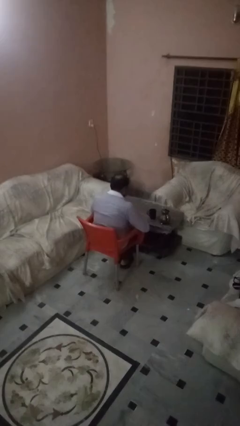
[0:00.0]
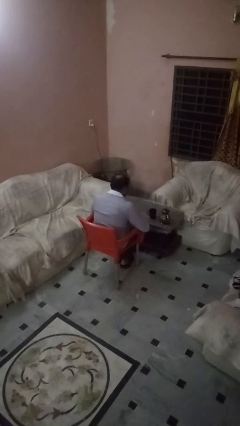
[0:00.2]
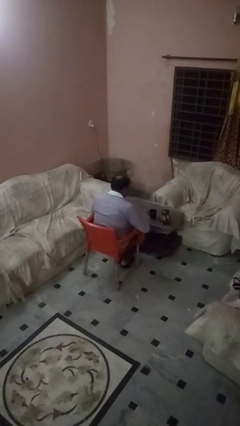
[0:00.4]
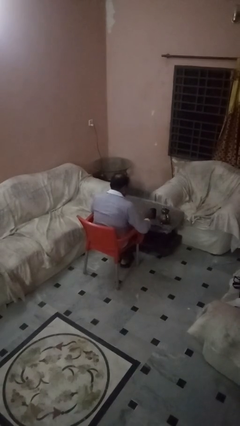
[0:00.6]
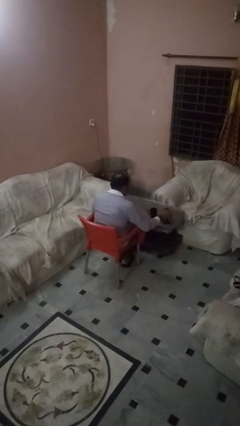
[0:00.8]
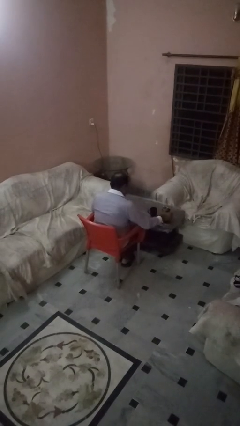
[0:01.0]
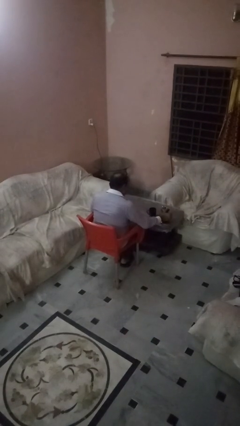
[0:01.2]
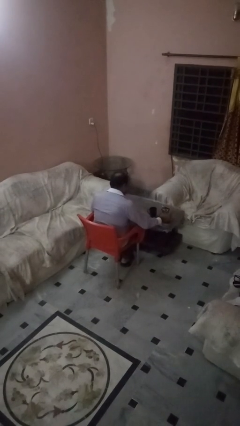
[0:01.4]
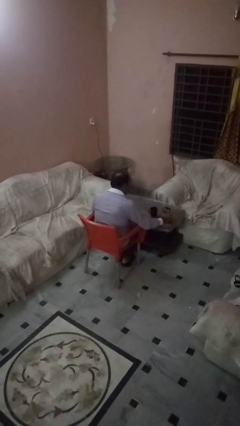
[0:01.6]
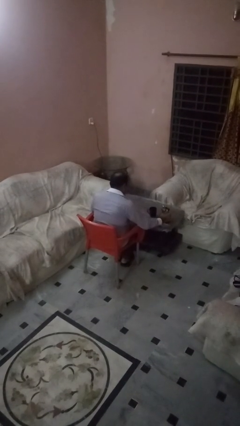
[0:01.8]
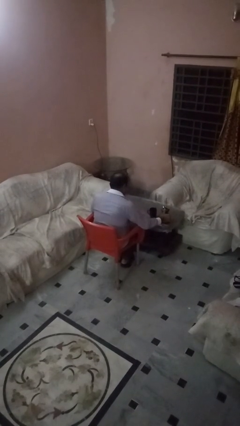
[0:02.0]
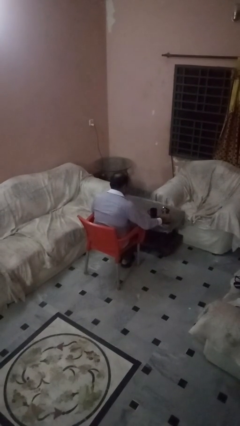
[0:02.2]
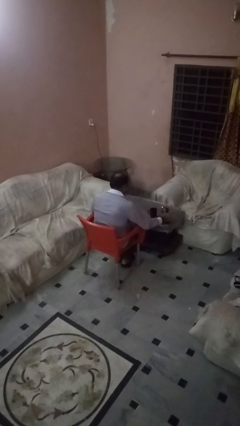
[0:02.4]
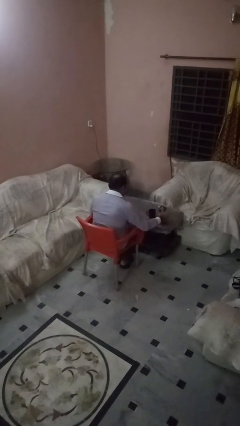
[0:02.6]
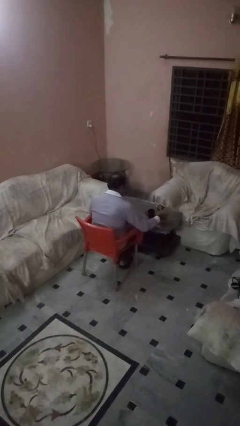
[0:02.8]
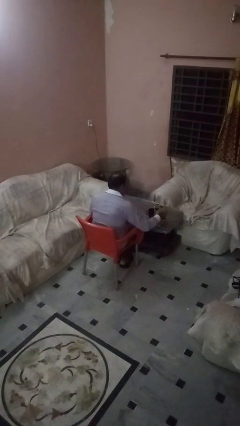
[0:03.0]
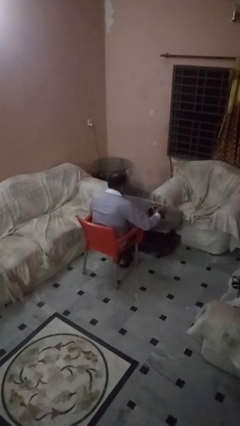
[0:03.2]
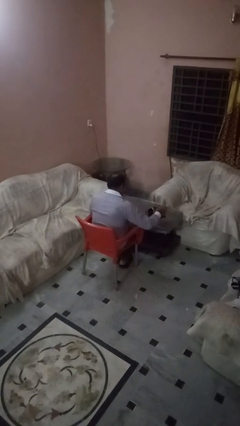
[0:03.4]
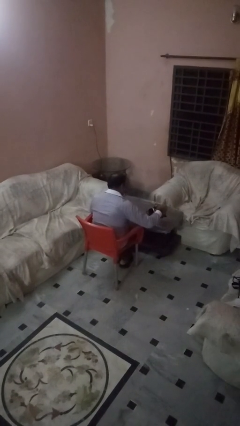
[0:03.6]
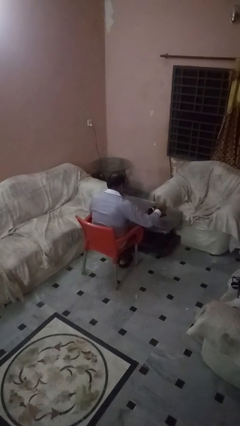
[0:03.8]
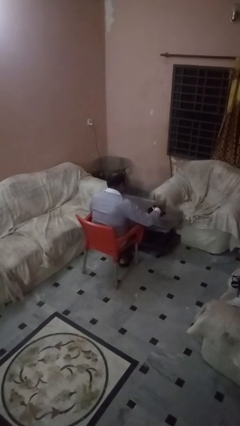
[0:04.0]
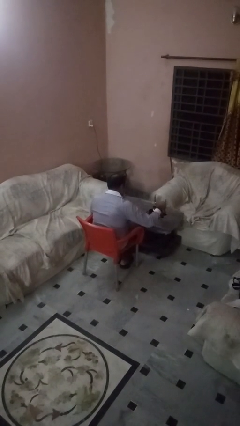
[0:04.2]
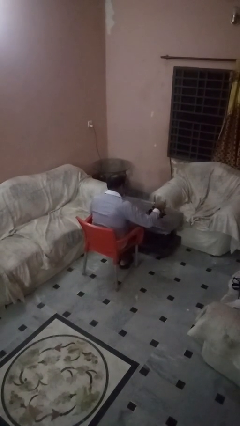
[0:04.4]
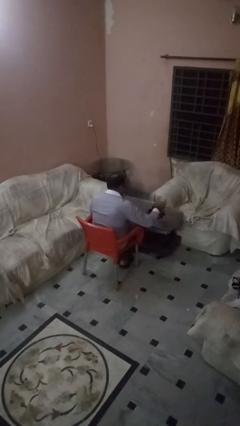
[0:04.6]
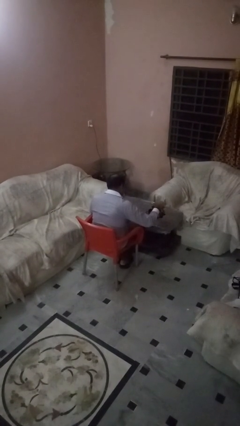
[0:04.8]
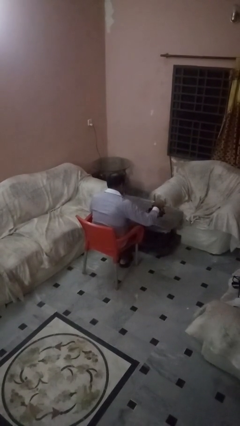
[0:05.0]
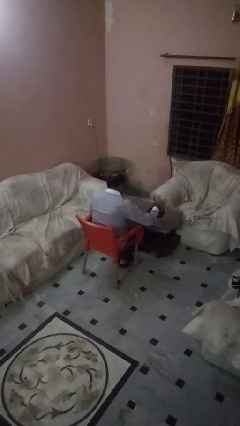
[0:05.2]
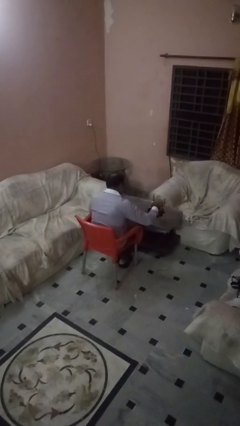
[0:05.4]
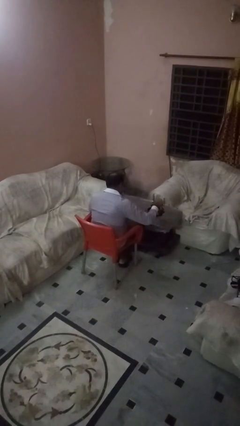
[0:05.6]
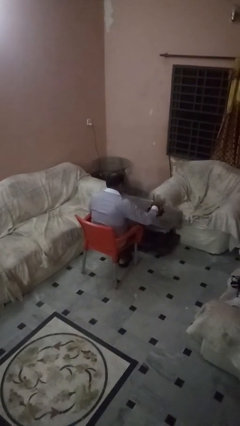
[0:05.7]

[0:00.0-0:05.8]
person pours coffee into mug

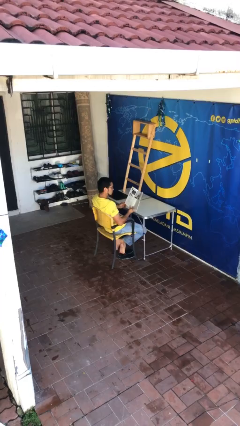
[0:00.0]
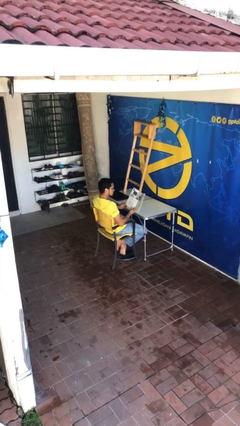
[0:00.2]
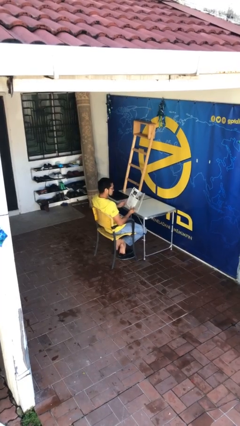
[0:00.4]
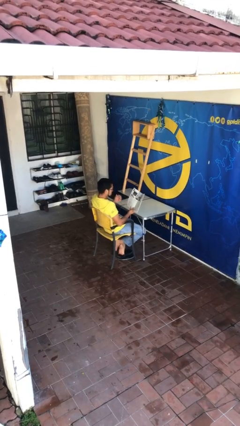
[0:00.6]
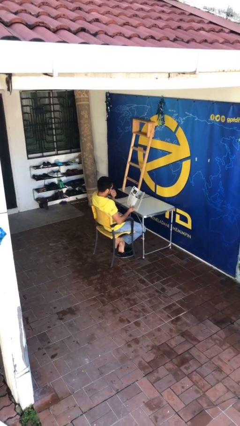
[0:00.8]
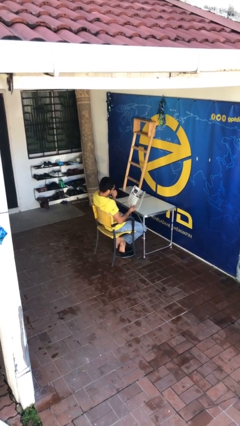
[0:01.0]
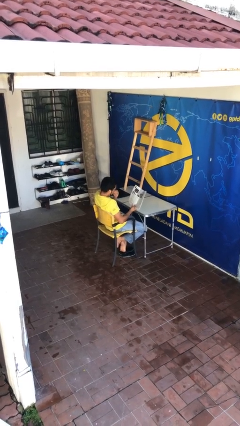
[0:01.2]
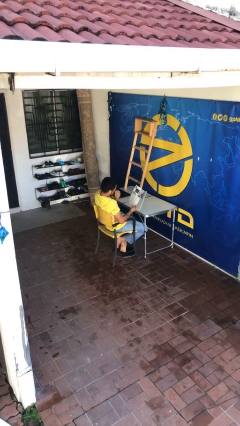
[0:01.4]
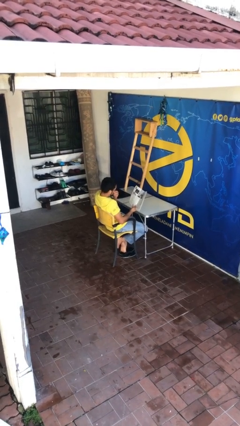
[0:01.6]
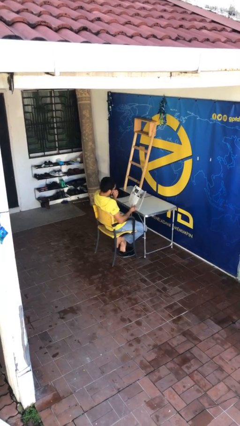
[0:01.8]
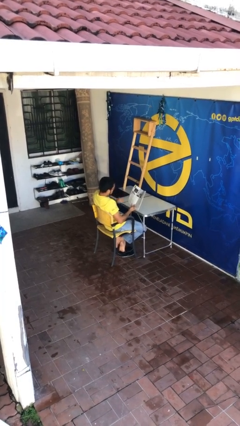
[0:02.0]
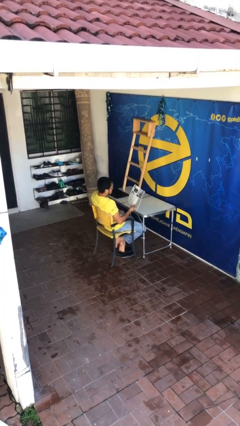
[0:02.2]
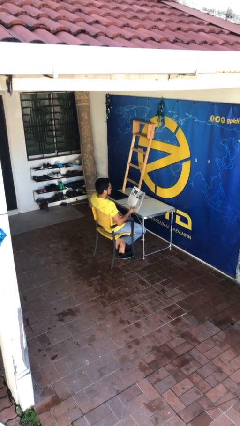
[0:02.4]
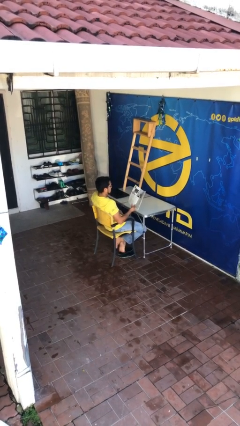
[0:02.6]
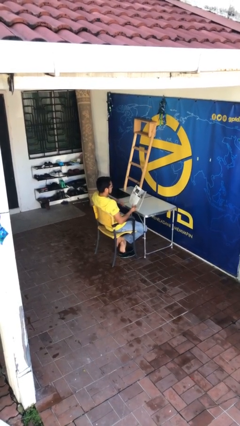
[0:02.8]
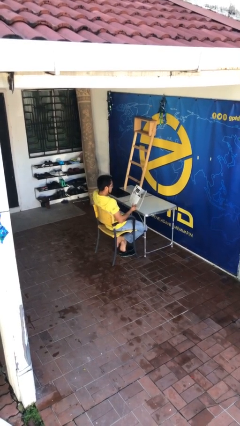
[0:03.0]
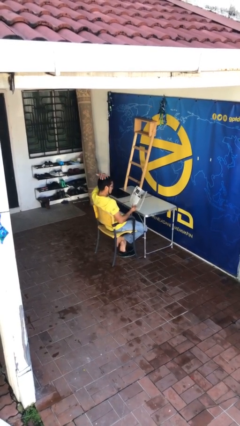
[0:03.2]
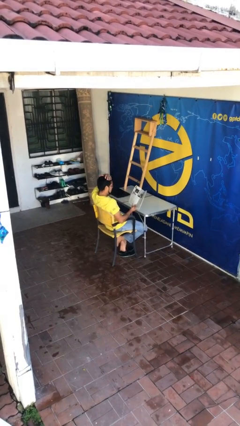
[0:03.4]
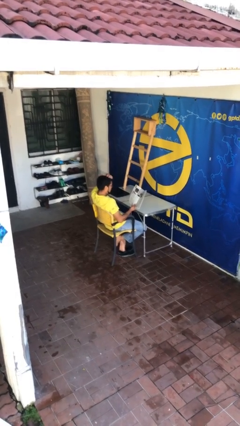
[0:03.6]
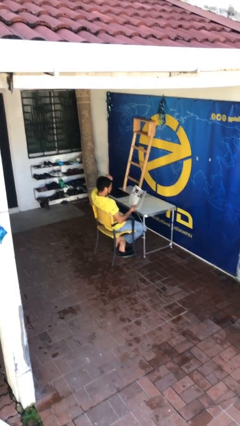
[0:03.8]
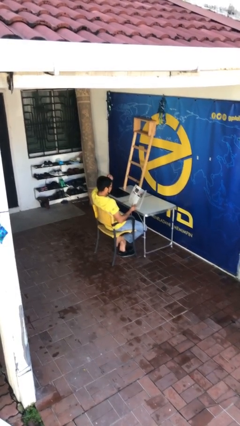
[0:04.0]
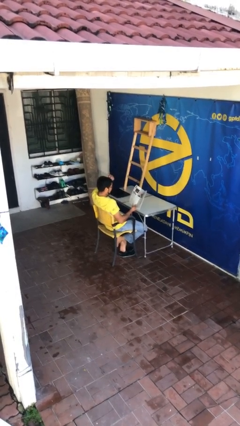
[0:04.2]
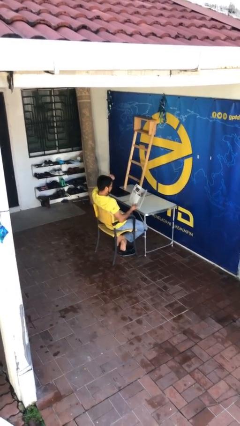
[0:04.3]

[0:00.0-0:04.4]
person reads document

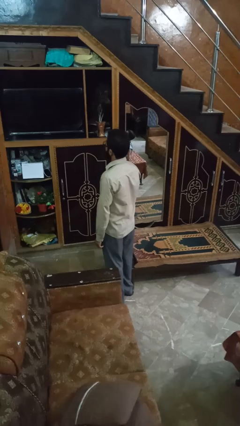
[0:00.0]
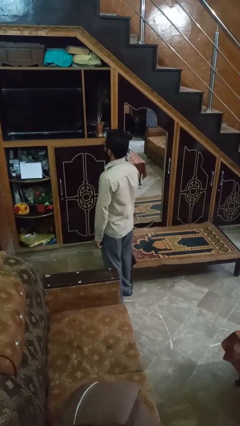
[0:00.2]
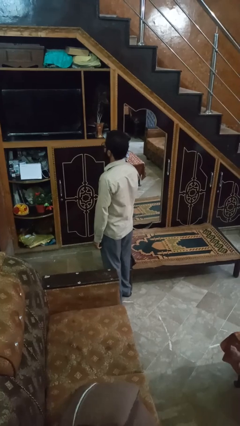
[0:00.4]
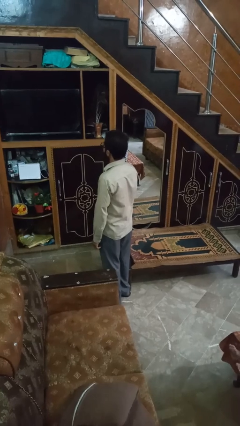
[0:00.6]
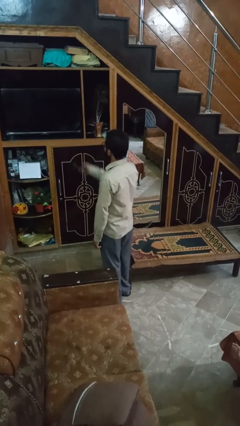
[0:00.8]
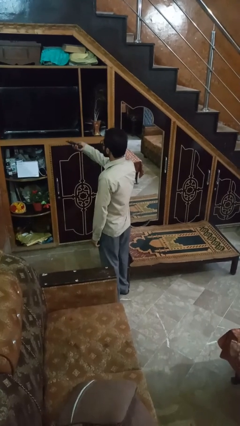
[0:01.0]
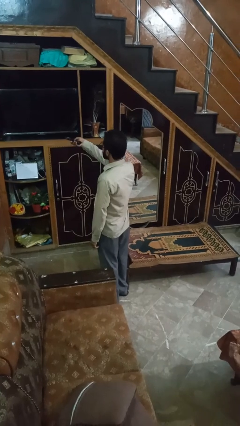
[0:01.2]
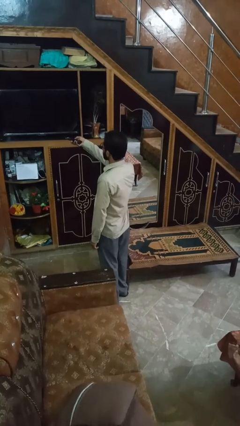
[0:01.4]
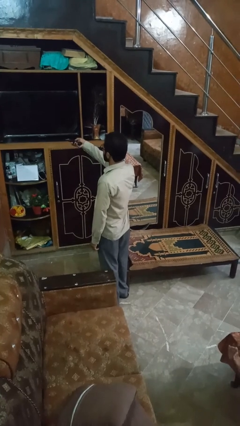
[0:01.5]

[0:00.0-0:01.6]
person uses television remote

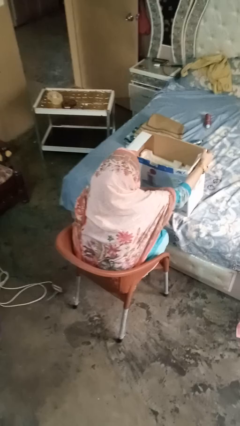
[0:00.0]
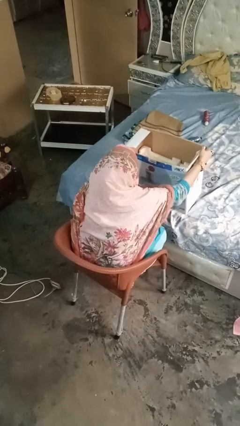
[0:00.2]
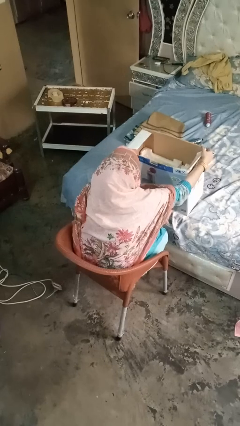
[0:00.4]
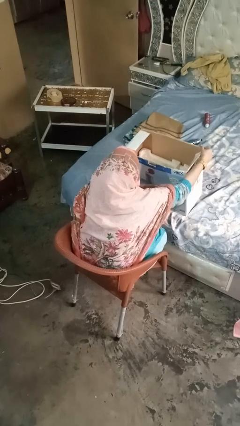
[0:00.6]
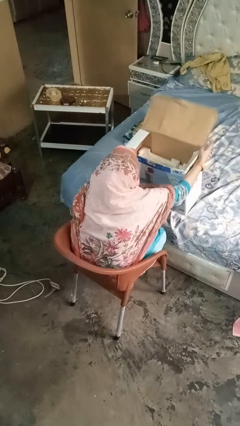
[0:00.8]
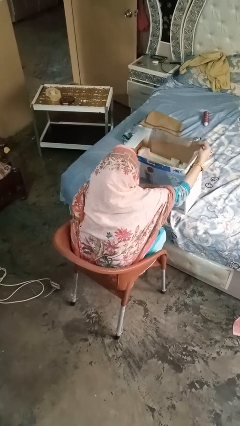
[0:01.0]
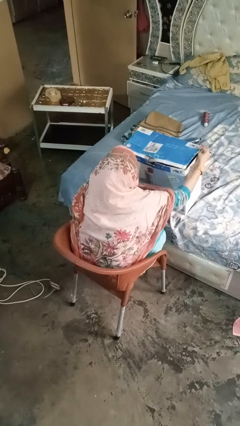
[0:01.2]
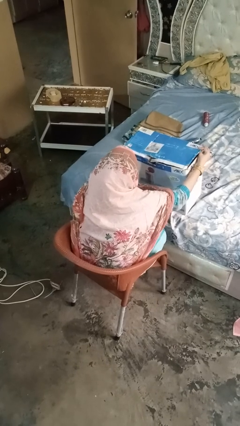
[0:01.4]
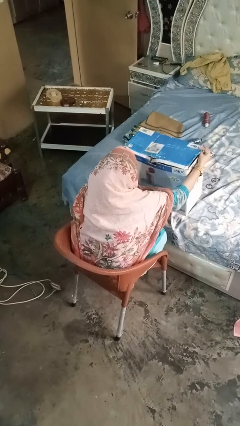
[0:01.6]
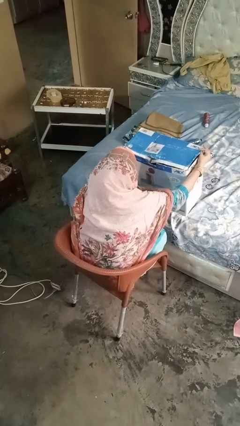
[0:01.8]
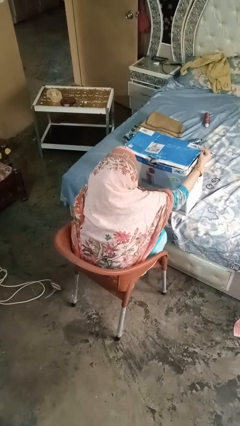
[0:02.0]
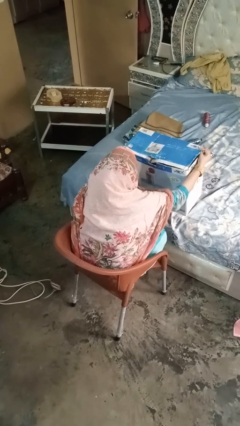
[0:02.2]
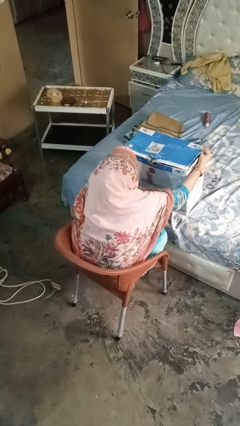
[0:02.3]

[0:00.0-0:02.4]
person closes box

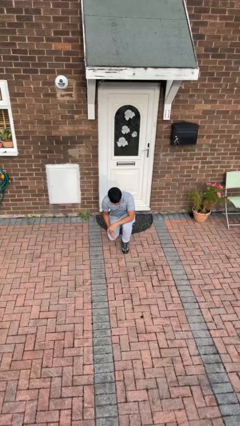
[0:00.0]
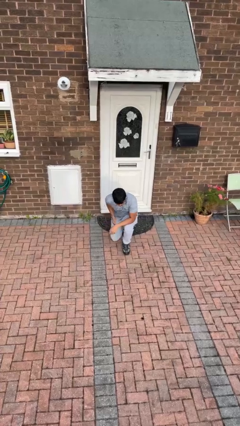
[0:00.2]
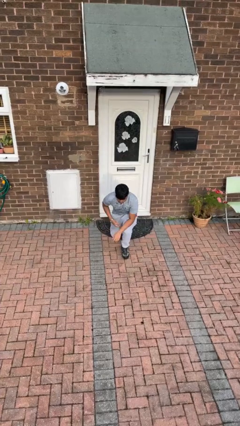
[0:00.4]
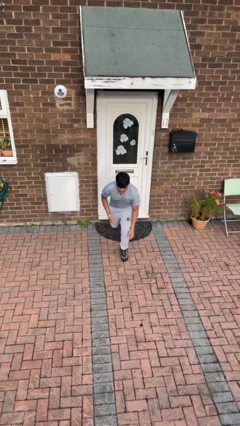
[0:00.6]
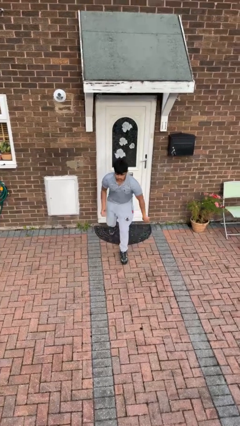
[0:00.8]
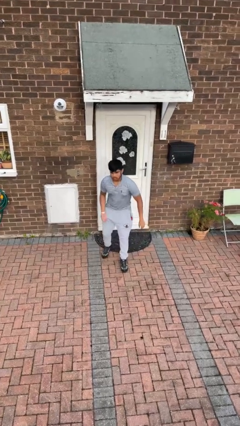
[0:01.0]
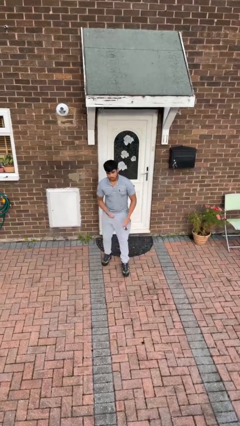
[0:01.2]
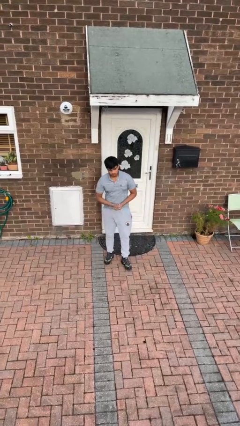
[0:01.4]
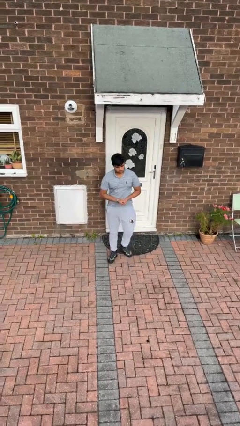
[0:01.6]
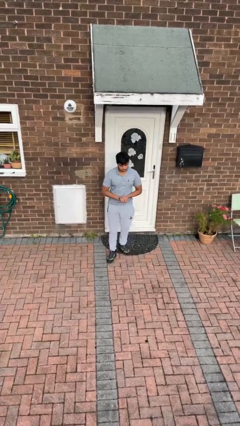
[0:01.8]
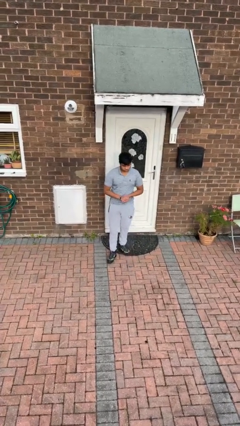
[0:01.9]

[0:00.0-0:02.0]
person stands up from floor

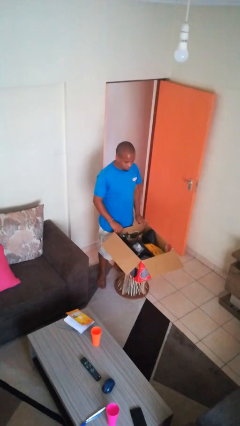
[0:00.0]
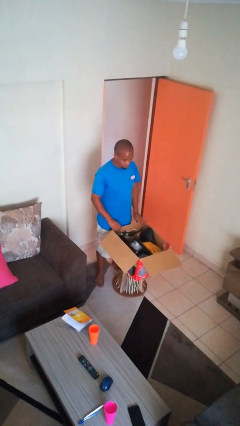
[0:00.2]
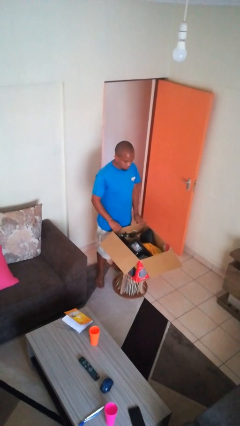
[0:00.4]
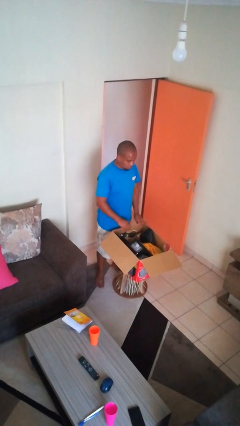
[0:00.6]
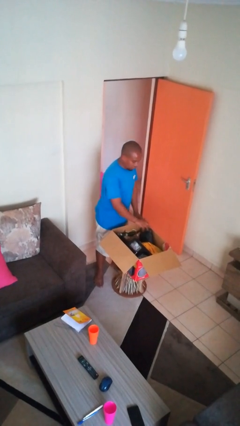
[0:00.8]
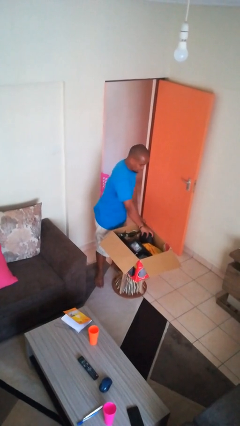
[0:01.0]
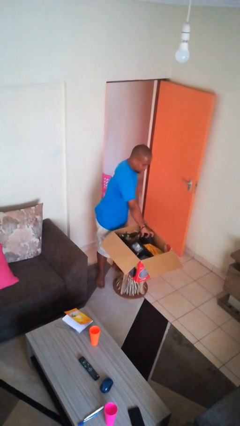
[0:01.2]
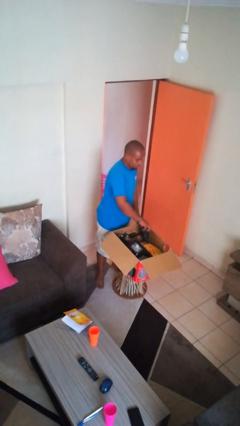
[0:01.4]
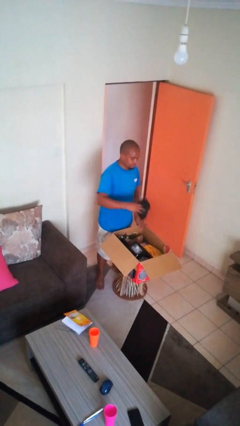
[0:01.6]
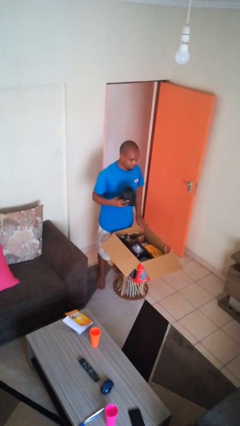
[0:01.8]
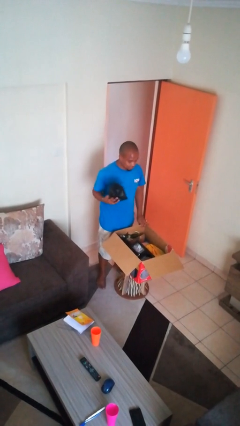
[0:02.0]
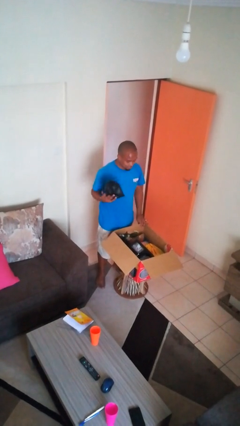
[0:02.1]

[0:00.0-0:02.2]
person takes object from box
